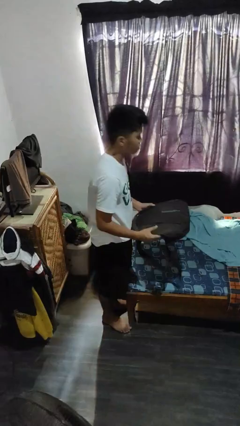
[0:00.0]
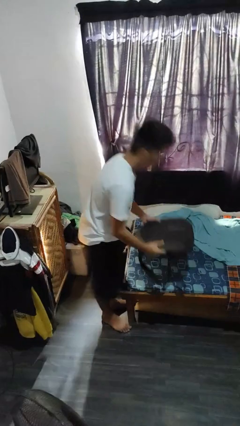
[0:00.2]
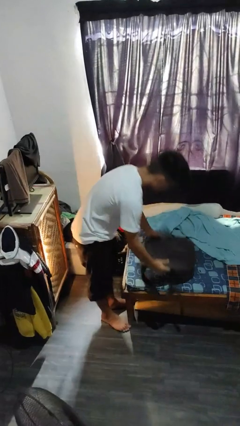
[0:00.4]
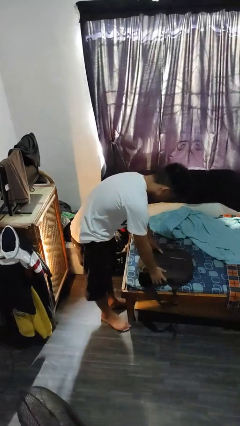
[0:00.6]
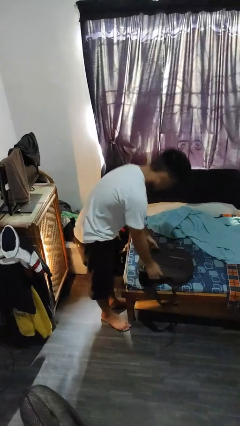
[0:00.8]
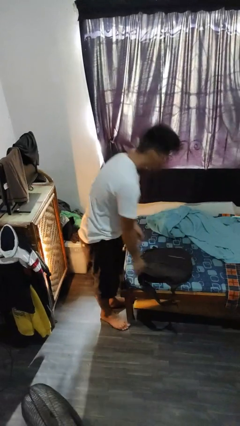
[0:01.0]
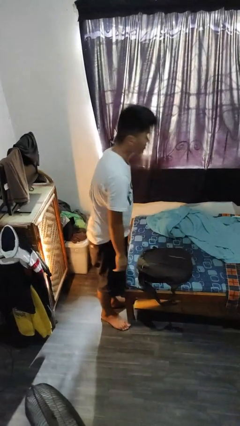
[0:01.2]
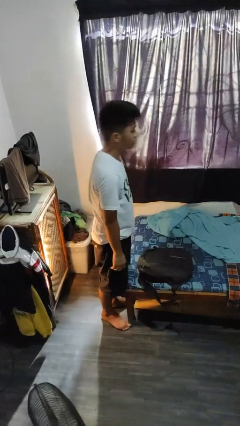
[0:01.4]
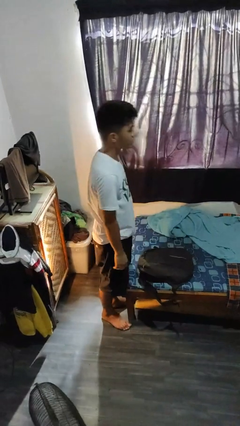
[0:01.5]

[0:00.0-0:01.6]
person puts down object on bed

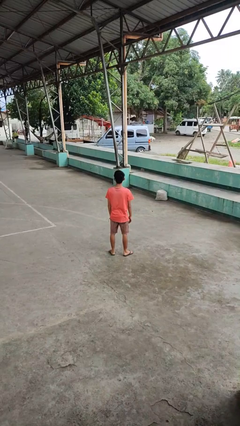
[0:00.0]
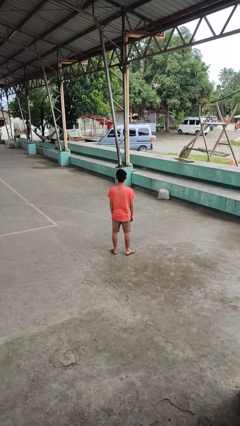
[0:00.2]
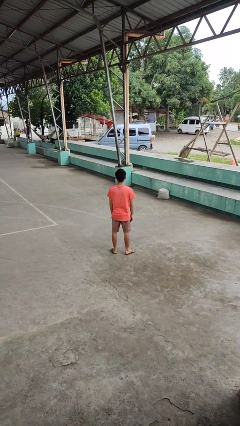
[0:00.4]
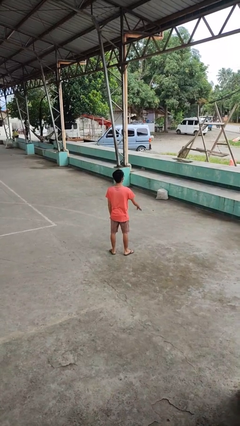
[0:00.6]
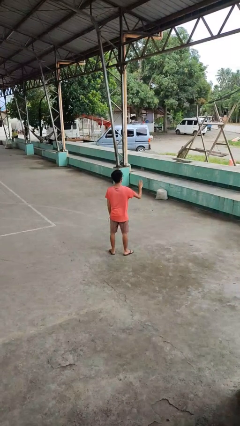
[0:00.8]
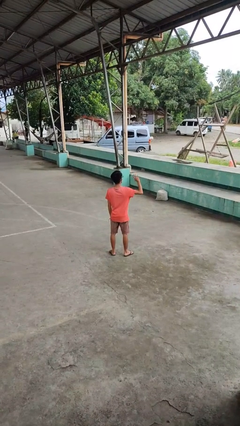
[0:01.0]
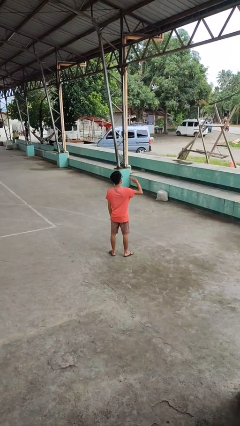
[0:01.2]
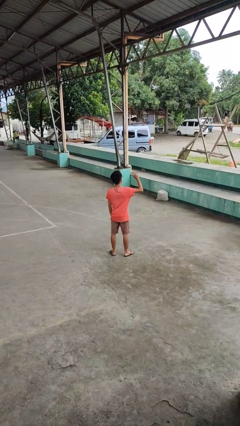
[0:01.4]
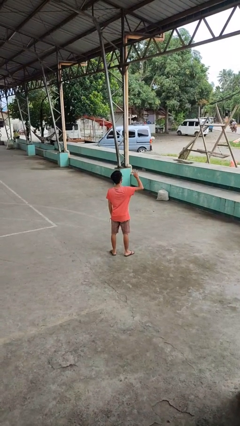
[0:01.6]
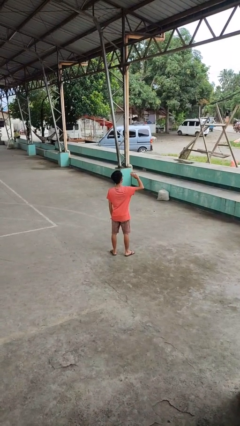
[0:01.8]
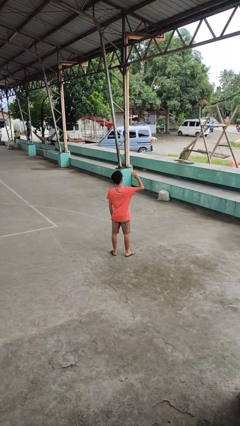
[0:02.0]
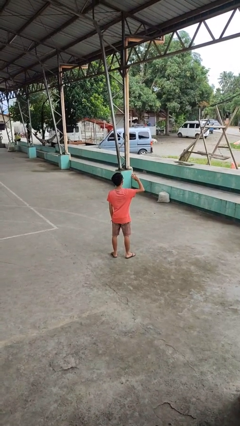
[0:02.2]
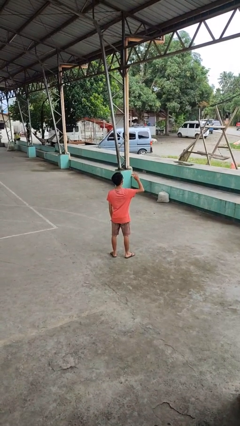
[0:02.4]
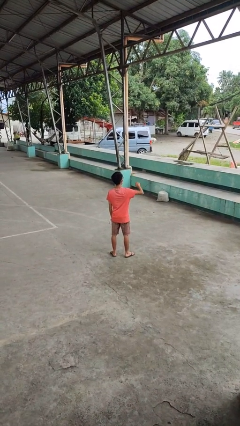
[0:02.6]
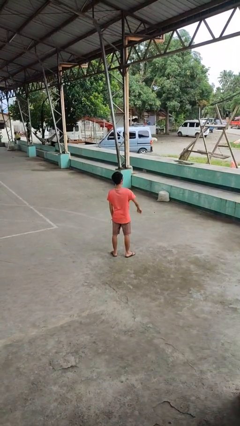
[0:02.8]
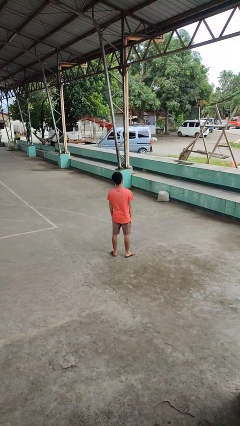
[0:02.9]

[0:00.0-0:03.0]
person waves at person

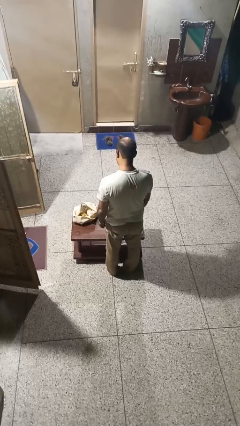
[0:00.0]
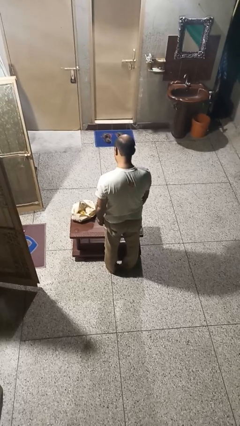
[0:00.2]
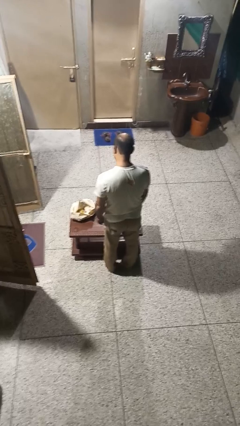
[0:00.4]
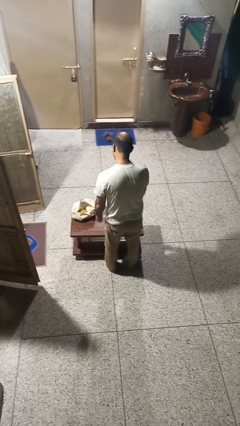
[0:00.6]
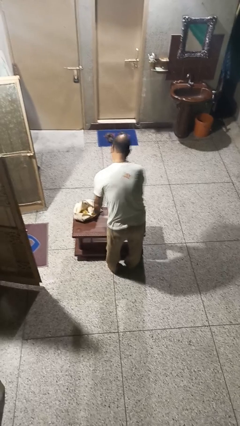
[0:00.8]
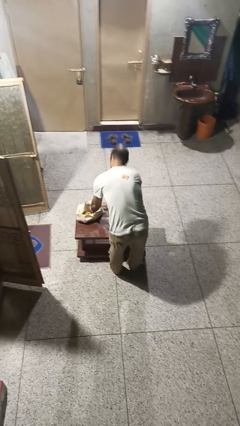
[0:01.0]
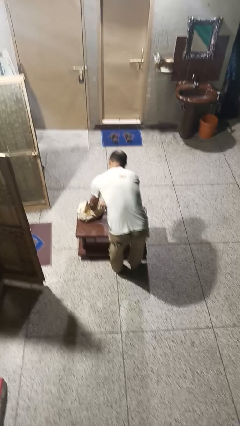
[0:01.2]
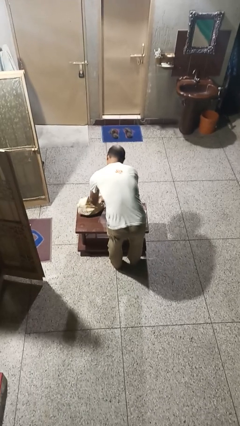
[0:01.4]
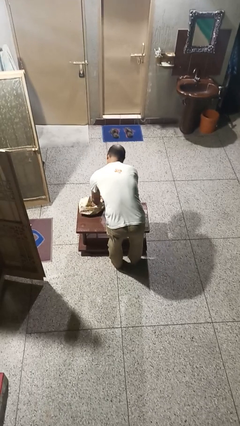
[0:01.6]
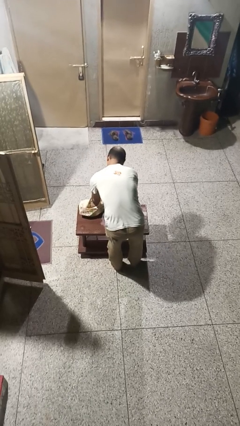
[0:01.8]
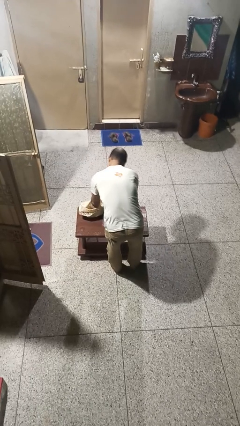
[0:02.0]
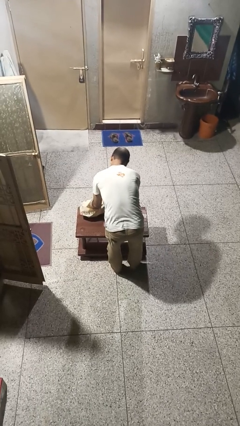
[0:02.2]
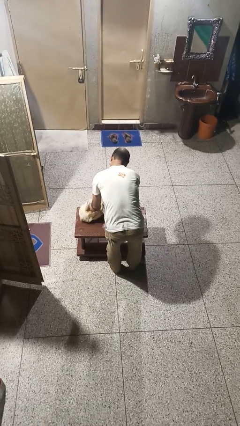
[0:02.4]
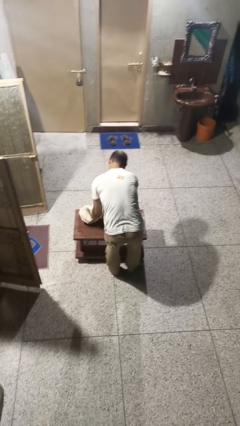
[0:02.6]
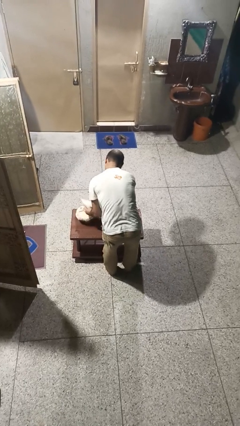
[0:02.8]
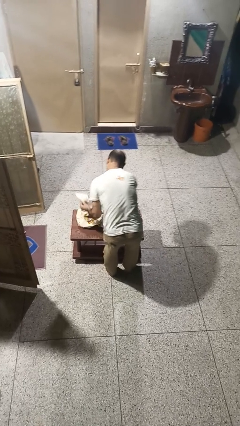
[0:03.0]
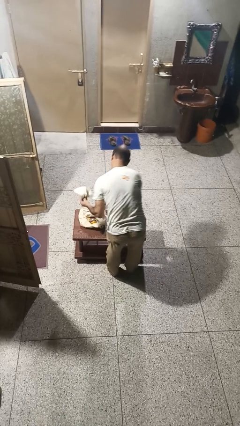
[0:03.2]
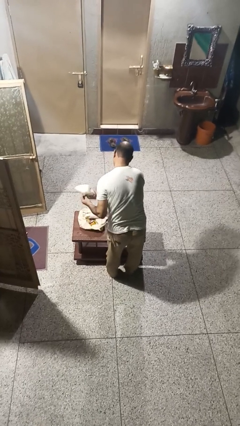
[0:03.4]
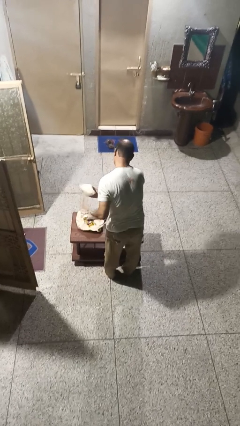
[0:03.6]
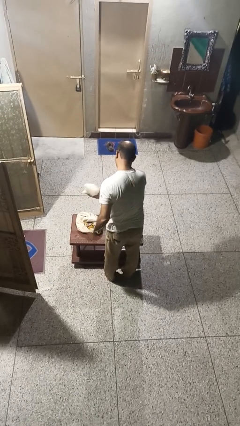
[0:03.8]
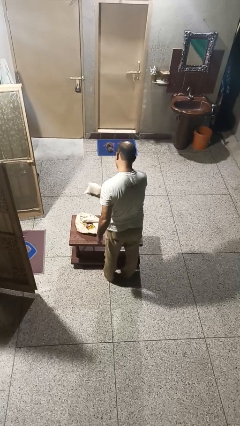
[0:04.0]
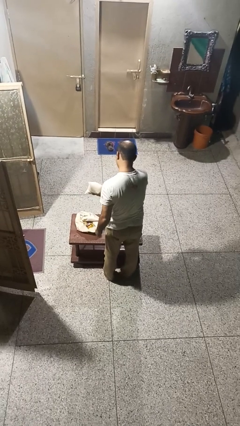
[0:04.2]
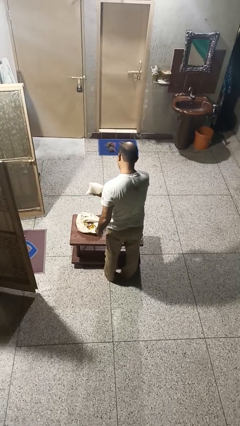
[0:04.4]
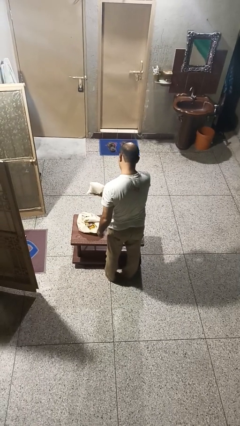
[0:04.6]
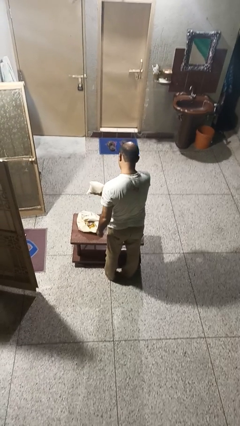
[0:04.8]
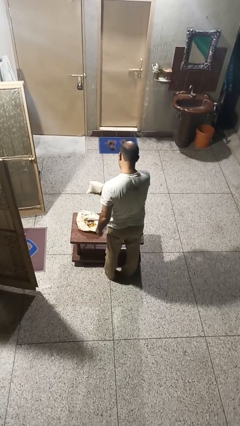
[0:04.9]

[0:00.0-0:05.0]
person takes object from bag

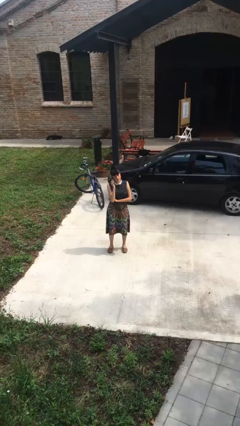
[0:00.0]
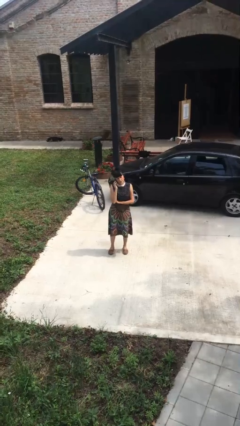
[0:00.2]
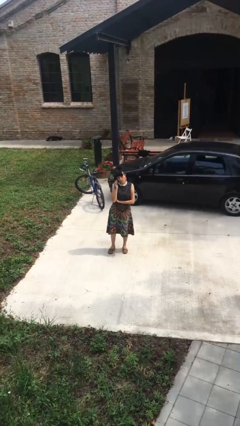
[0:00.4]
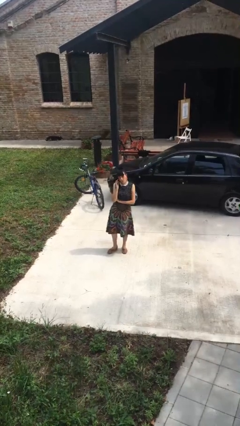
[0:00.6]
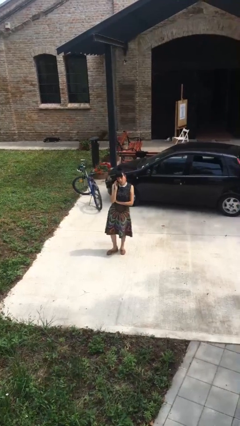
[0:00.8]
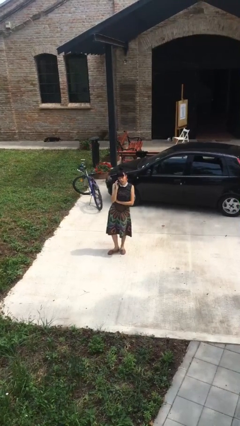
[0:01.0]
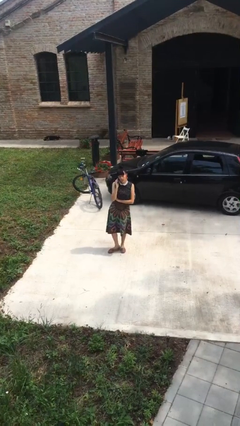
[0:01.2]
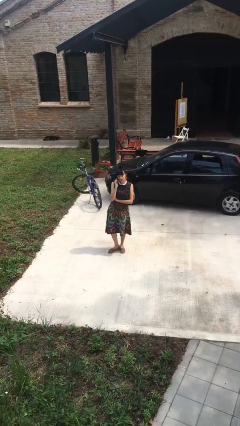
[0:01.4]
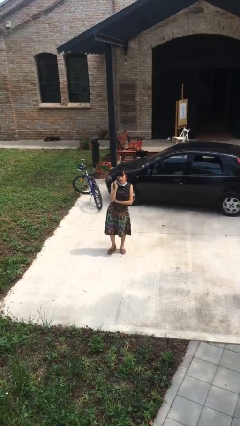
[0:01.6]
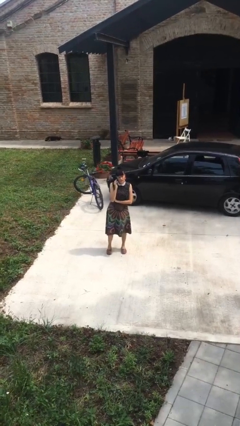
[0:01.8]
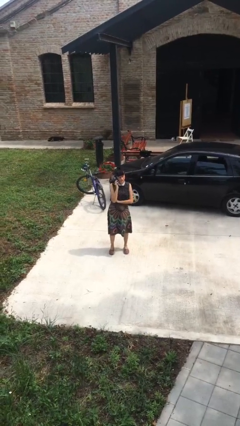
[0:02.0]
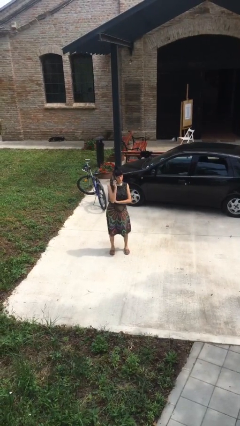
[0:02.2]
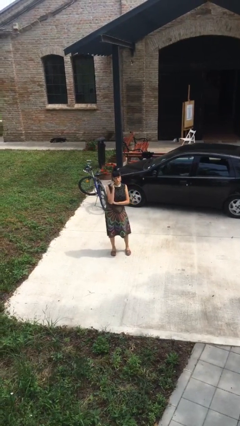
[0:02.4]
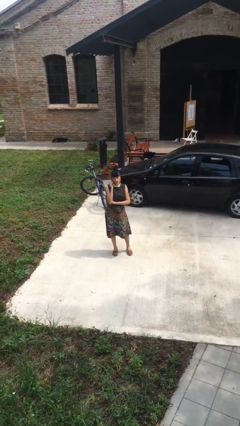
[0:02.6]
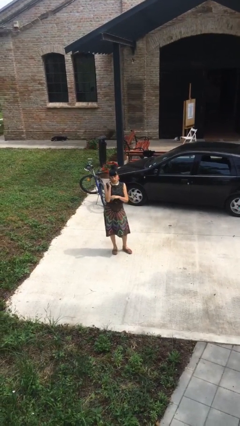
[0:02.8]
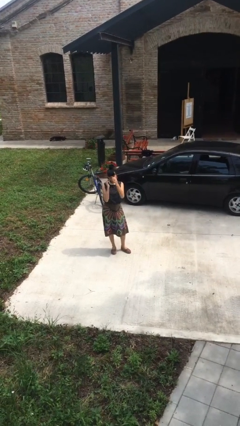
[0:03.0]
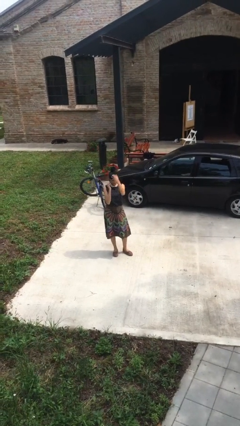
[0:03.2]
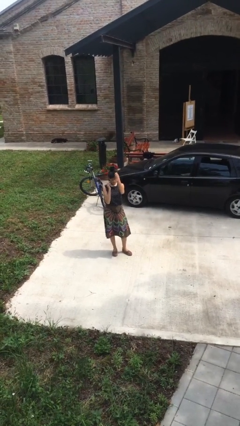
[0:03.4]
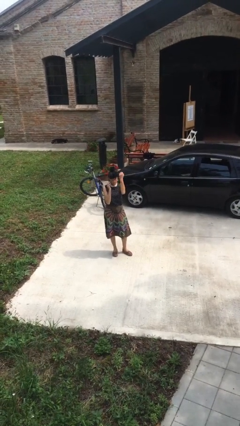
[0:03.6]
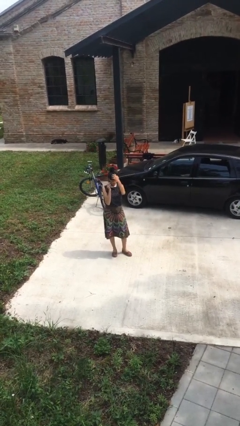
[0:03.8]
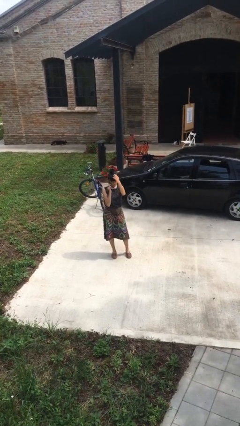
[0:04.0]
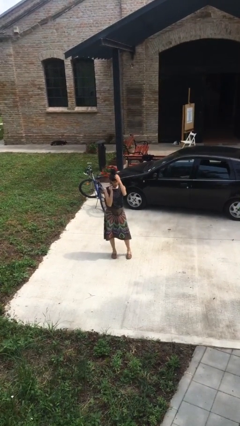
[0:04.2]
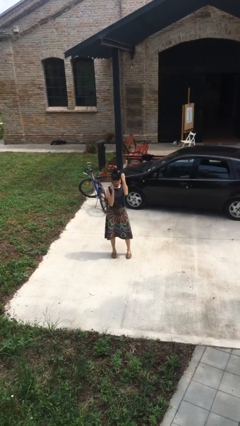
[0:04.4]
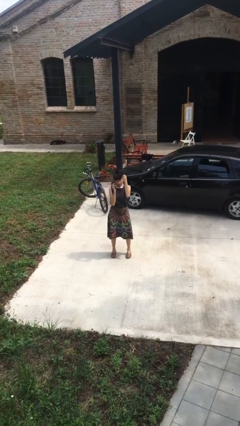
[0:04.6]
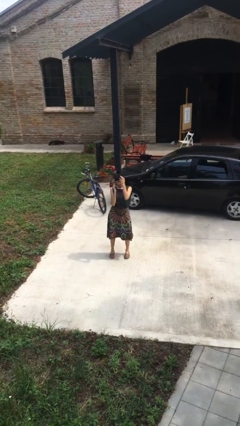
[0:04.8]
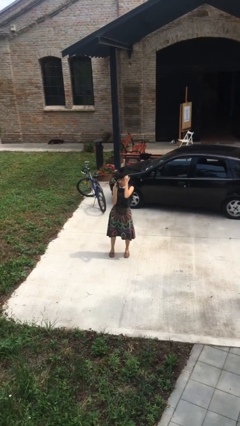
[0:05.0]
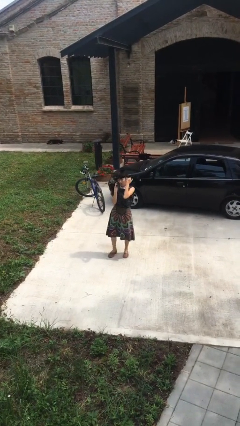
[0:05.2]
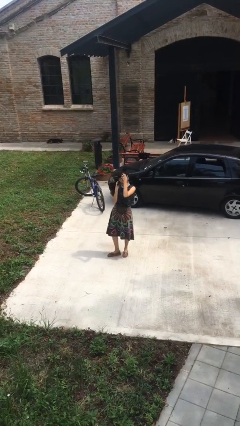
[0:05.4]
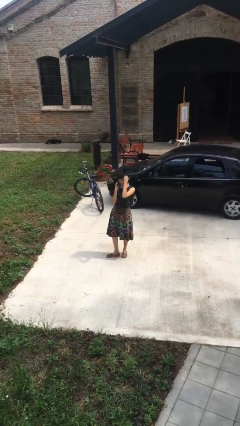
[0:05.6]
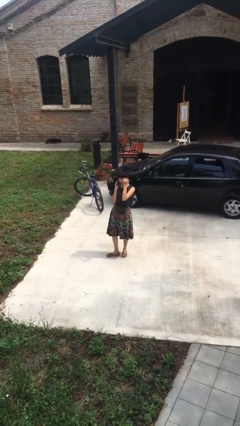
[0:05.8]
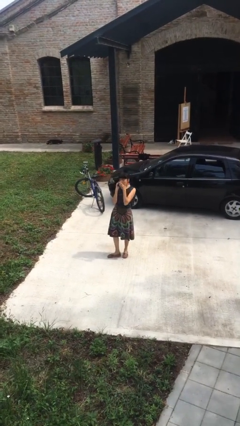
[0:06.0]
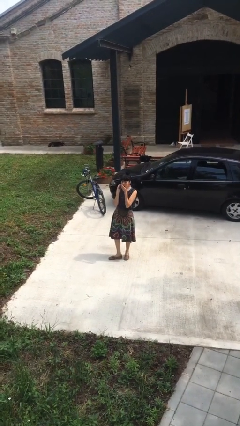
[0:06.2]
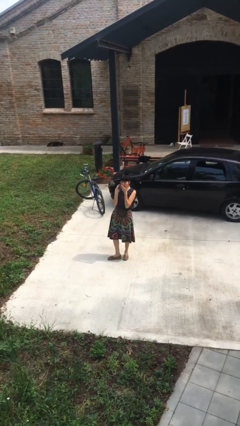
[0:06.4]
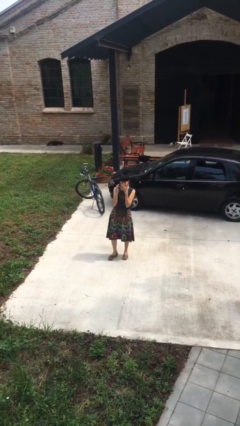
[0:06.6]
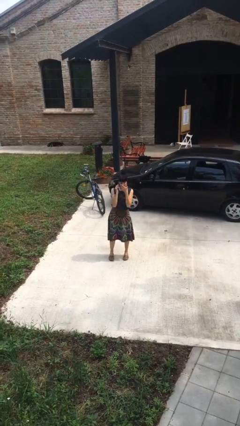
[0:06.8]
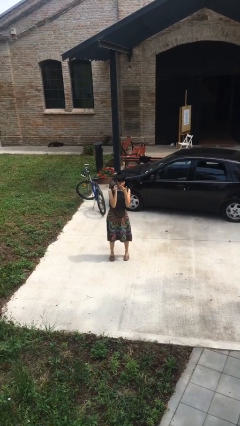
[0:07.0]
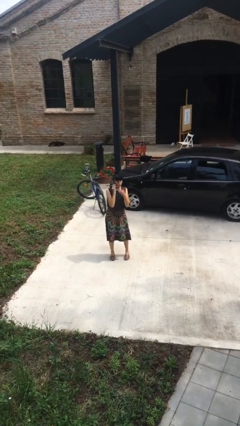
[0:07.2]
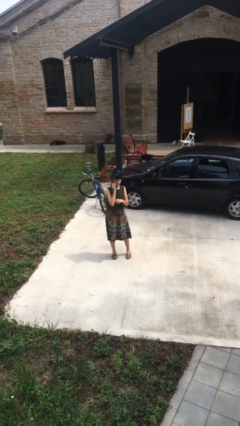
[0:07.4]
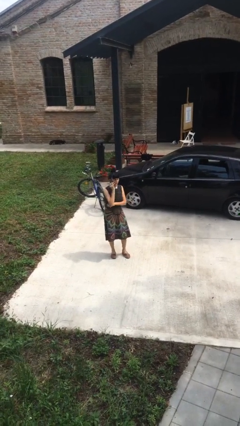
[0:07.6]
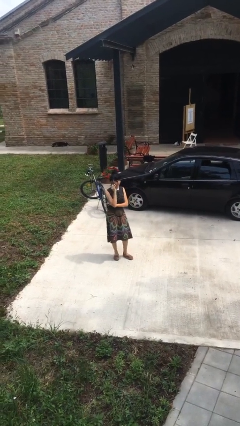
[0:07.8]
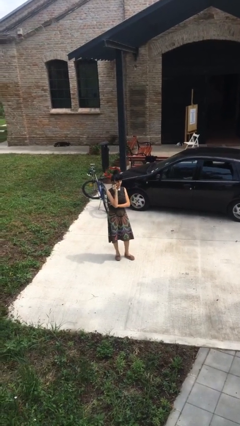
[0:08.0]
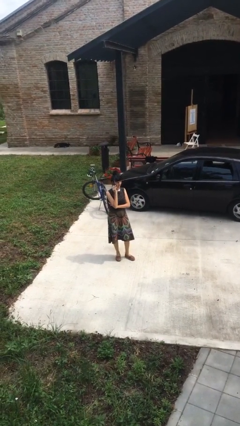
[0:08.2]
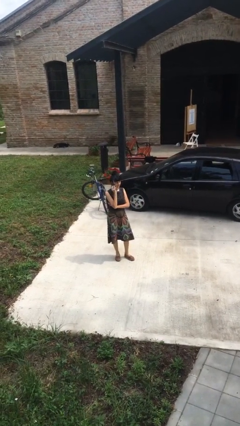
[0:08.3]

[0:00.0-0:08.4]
person talks on phone
